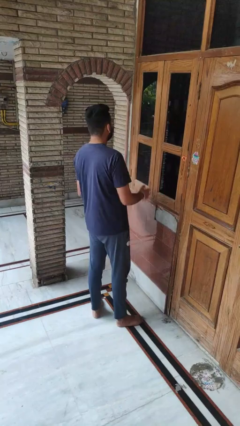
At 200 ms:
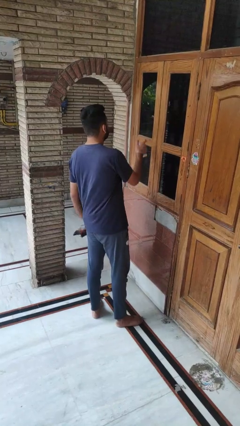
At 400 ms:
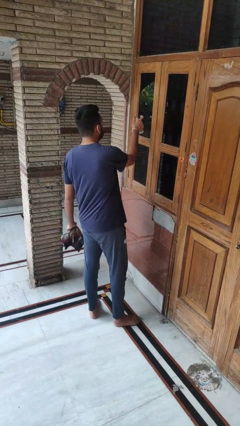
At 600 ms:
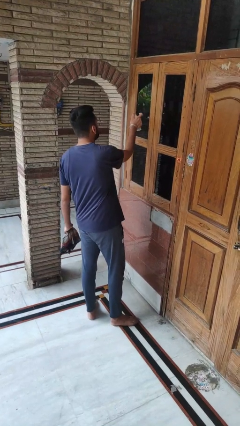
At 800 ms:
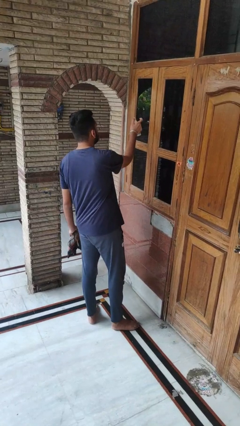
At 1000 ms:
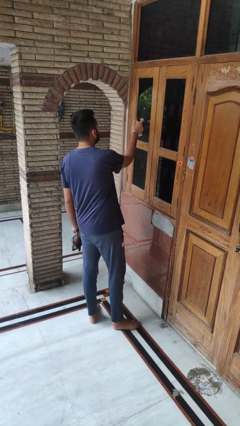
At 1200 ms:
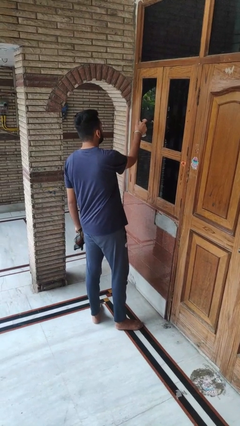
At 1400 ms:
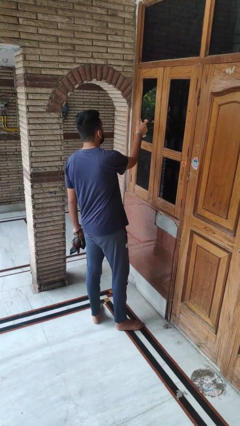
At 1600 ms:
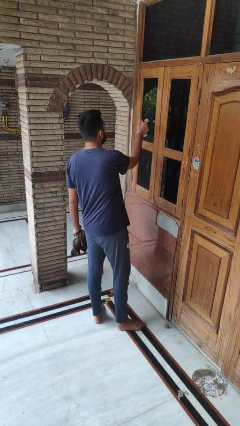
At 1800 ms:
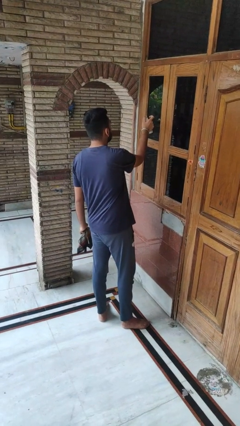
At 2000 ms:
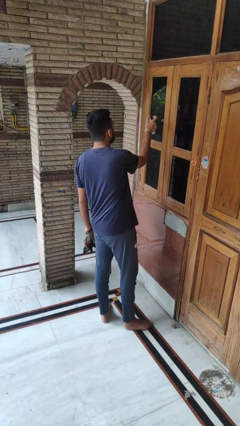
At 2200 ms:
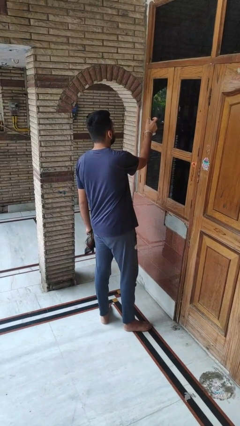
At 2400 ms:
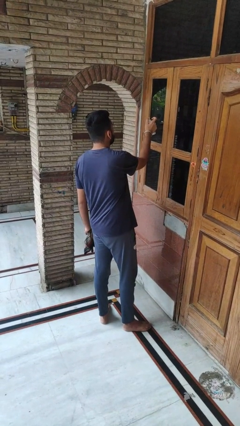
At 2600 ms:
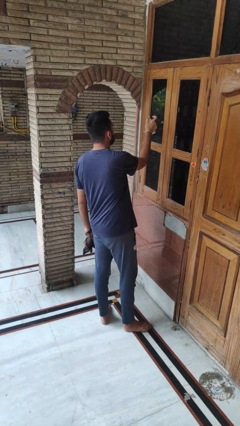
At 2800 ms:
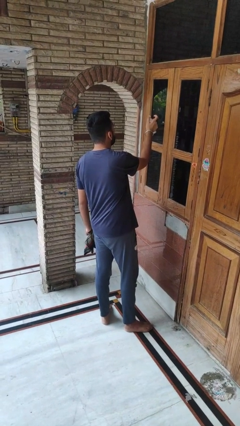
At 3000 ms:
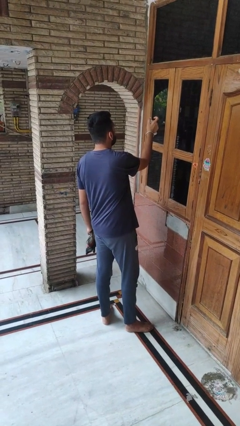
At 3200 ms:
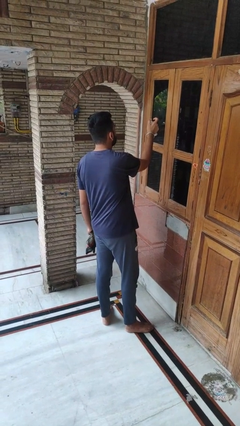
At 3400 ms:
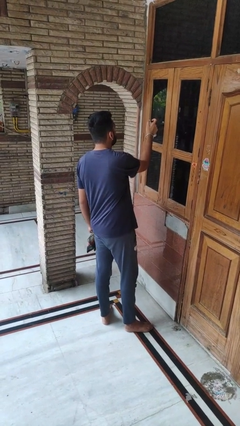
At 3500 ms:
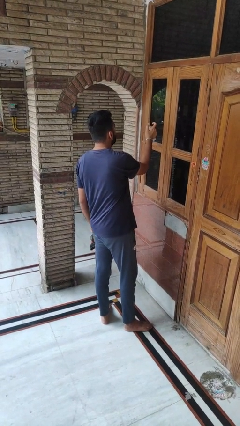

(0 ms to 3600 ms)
person sprays from bottle

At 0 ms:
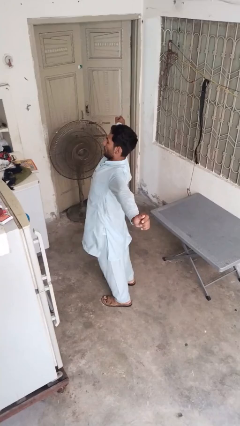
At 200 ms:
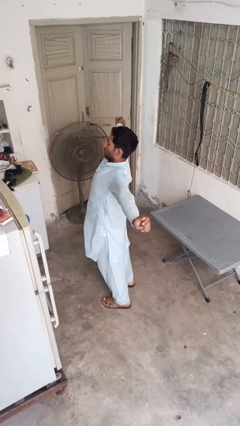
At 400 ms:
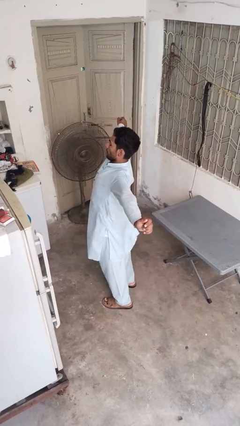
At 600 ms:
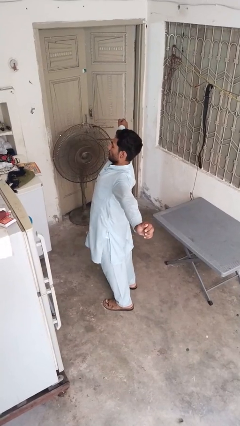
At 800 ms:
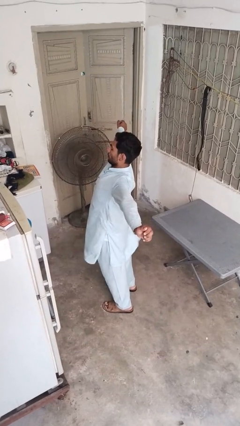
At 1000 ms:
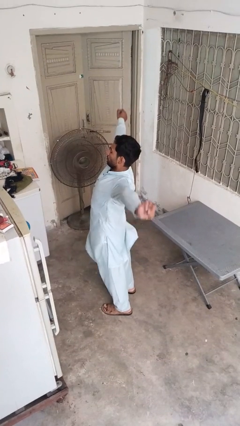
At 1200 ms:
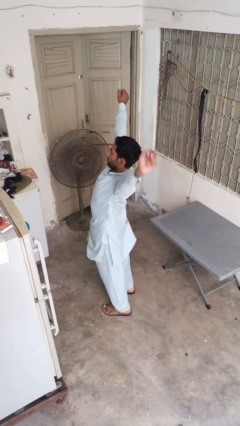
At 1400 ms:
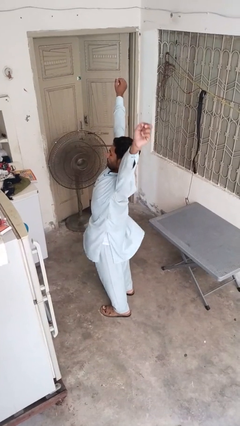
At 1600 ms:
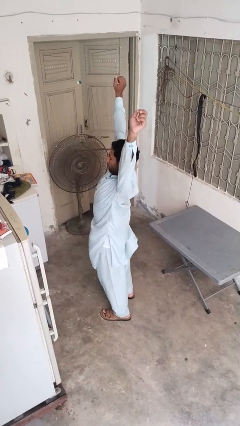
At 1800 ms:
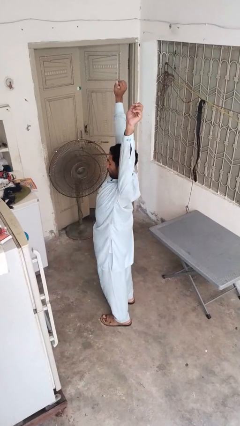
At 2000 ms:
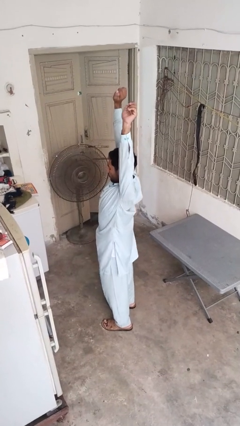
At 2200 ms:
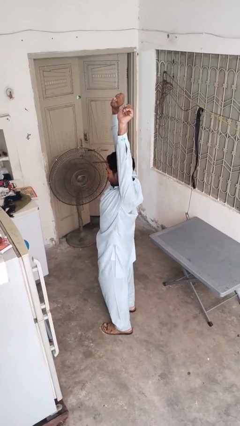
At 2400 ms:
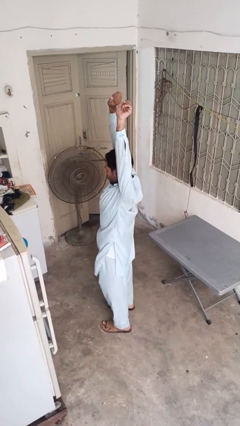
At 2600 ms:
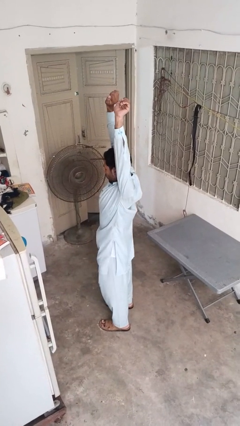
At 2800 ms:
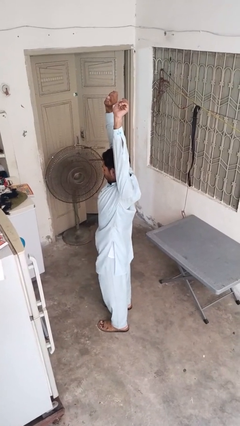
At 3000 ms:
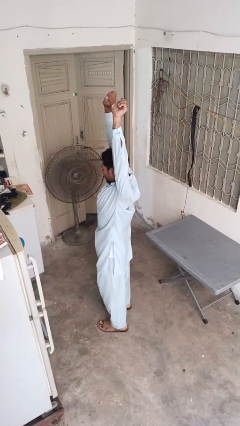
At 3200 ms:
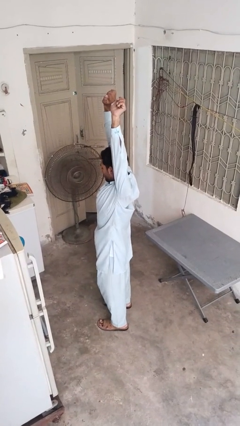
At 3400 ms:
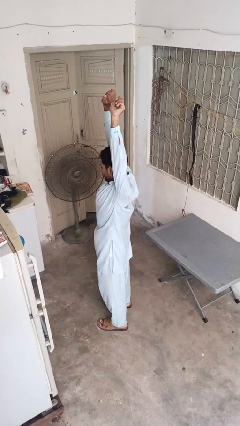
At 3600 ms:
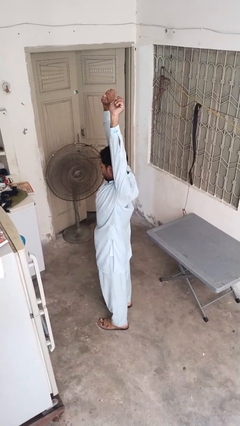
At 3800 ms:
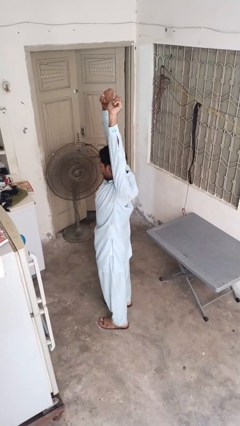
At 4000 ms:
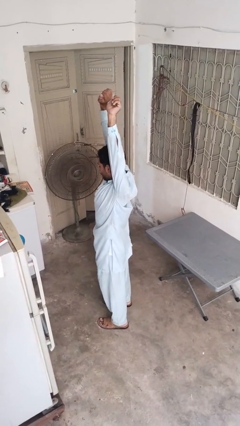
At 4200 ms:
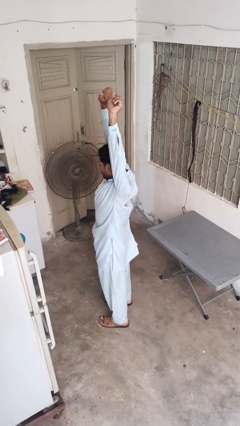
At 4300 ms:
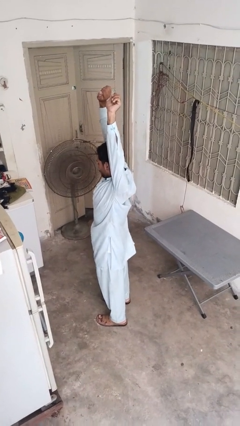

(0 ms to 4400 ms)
person stretches arms over head

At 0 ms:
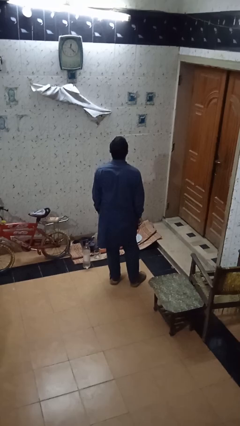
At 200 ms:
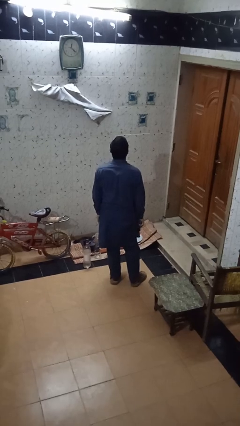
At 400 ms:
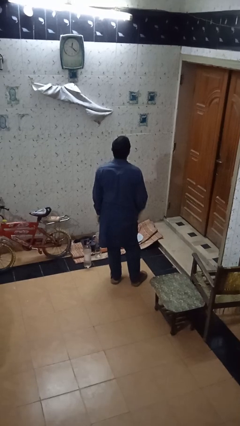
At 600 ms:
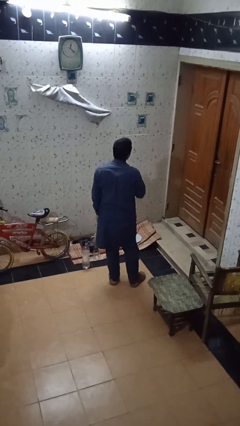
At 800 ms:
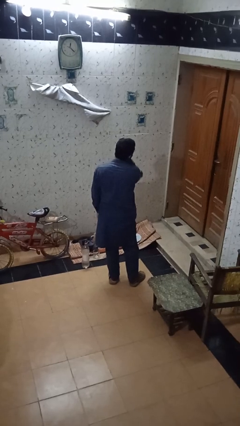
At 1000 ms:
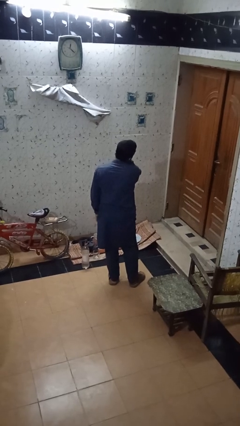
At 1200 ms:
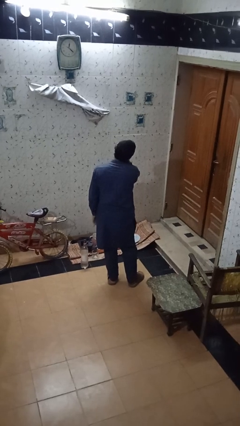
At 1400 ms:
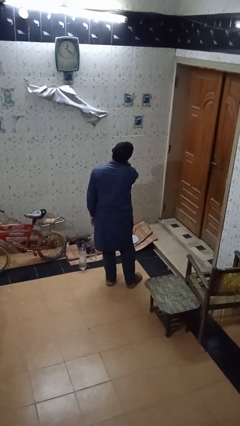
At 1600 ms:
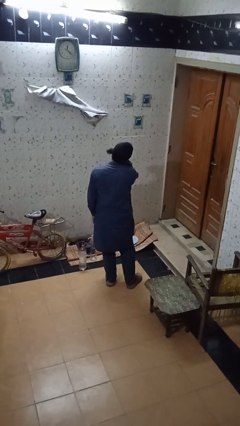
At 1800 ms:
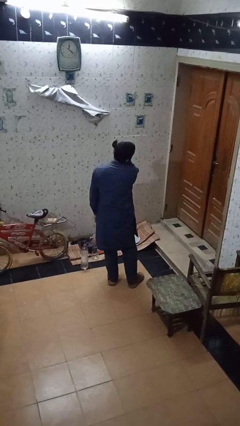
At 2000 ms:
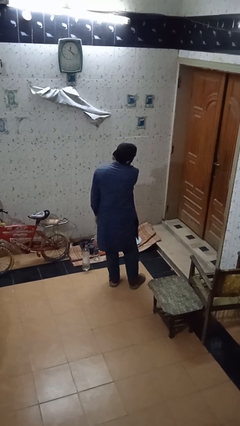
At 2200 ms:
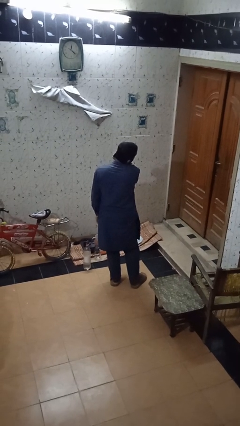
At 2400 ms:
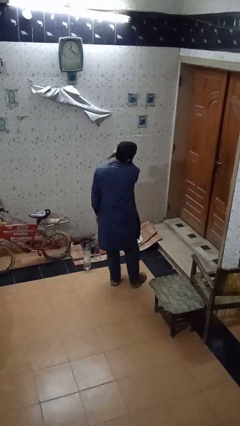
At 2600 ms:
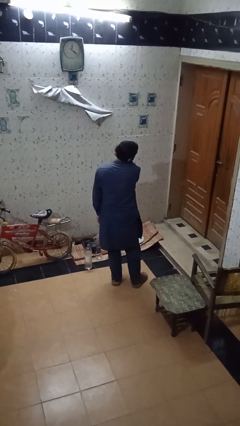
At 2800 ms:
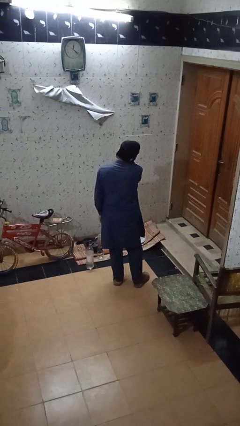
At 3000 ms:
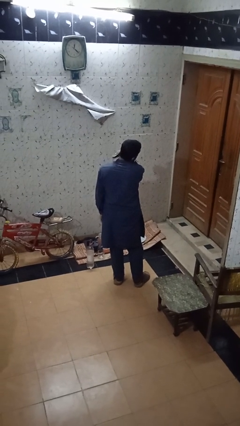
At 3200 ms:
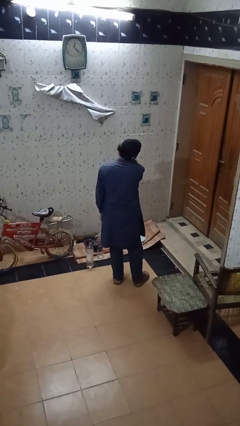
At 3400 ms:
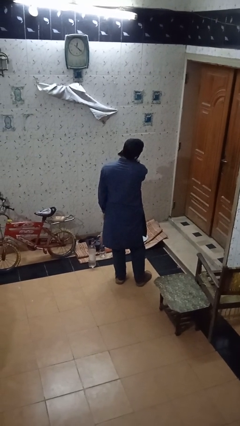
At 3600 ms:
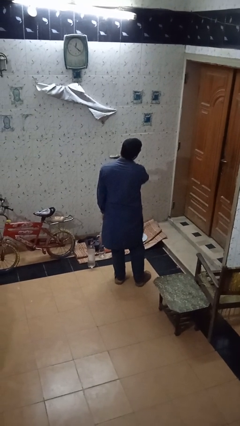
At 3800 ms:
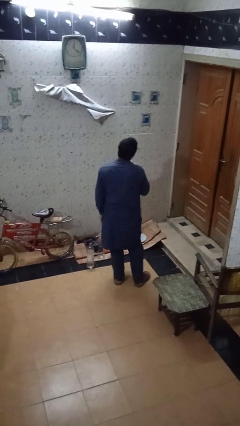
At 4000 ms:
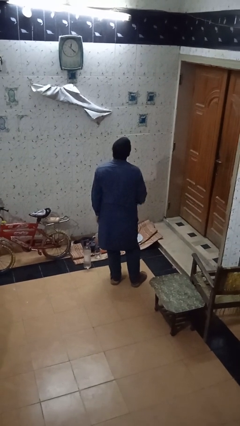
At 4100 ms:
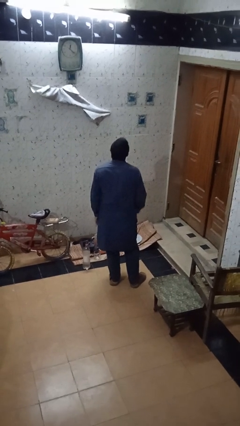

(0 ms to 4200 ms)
person brushes hair

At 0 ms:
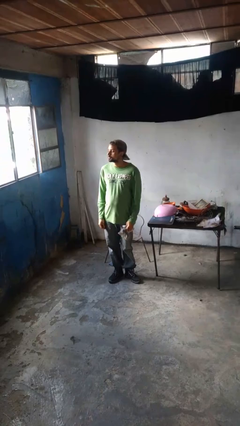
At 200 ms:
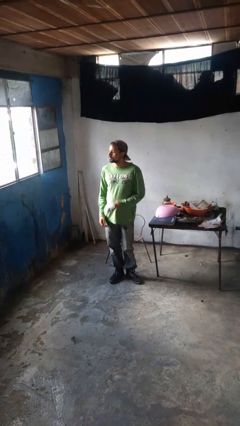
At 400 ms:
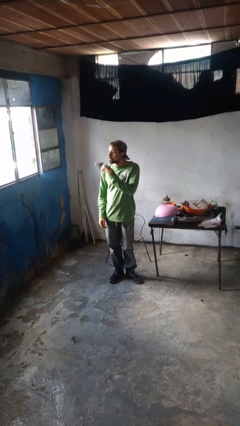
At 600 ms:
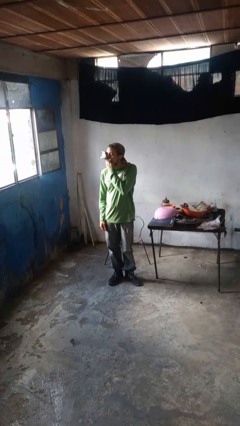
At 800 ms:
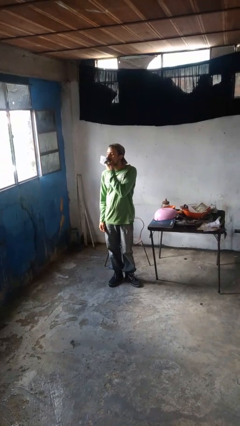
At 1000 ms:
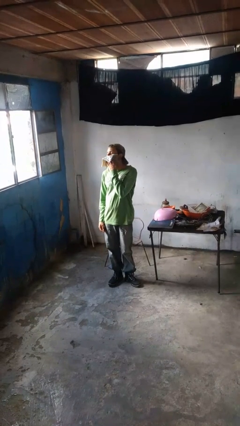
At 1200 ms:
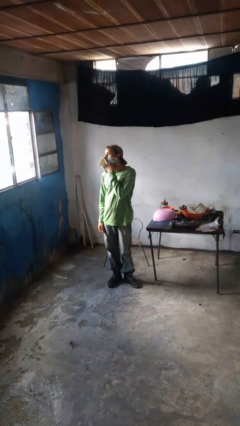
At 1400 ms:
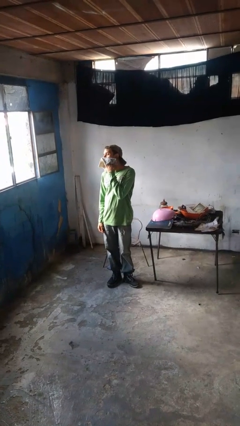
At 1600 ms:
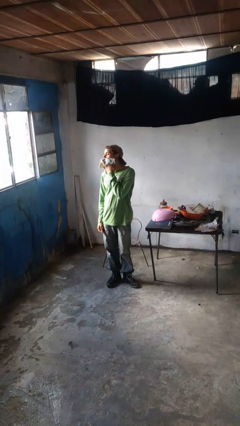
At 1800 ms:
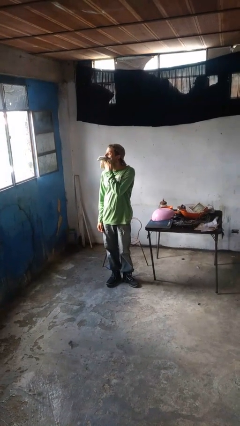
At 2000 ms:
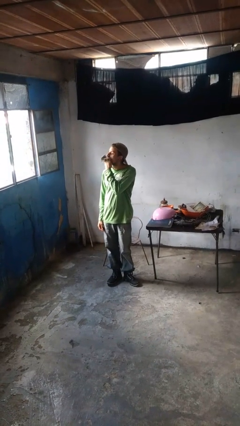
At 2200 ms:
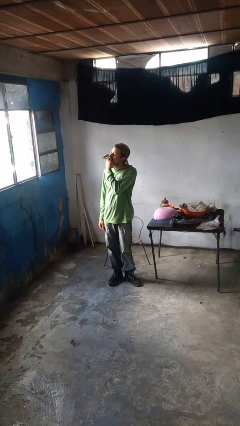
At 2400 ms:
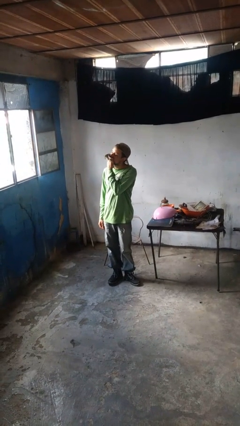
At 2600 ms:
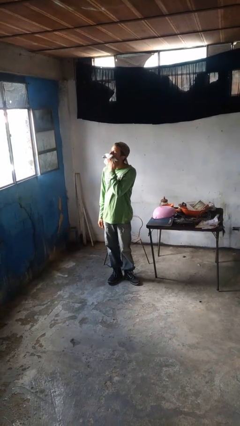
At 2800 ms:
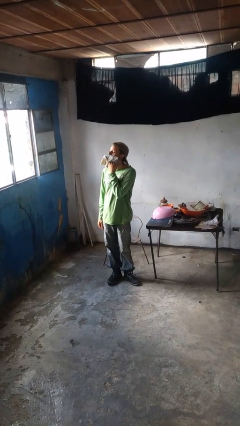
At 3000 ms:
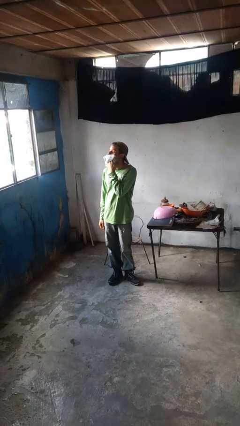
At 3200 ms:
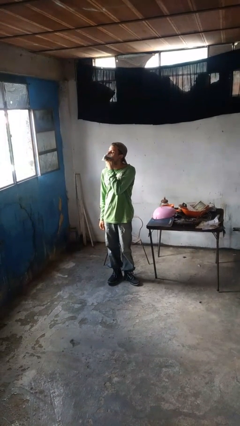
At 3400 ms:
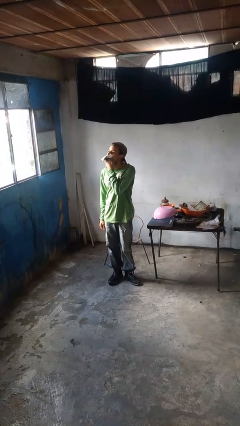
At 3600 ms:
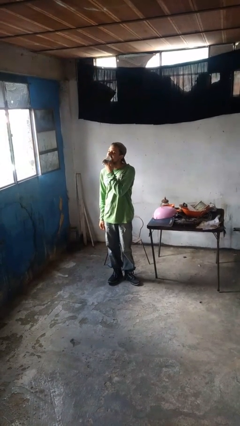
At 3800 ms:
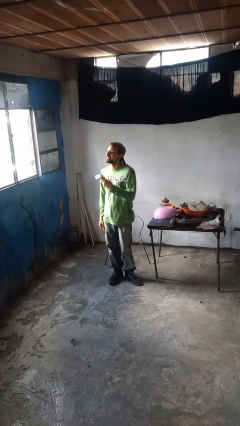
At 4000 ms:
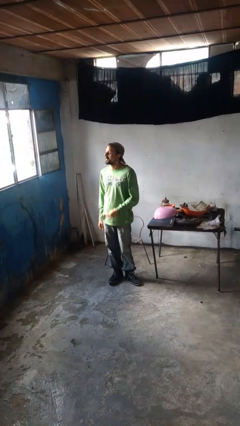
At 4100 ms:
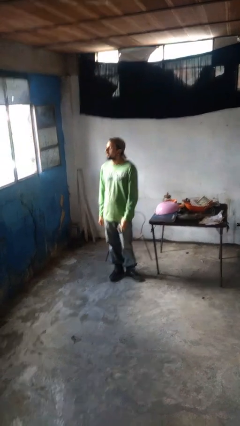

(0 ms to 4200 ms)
person wipes mouth with napkin

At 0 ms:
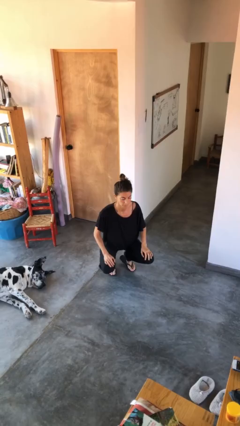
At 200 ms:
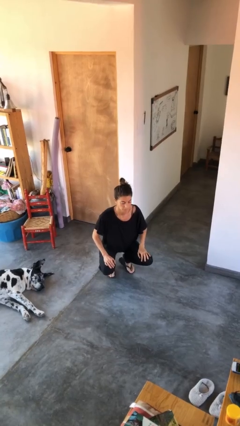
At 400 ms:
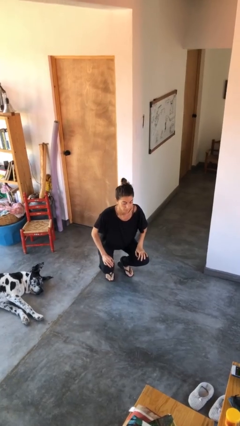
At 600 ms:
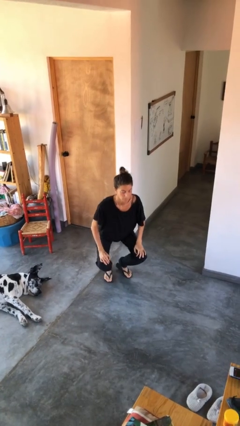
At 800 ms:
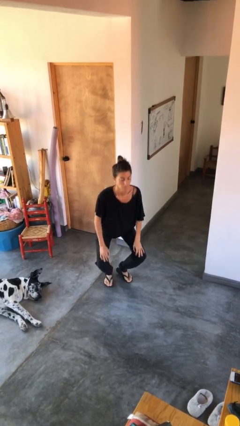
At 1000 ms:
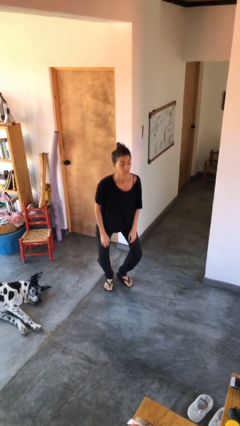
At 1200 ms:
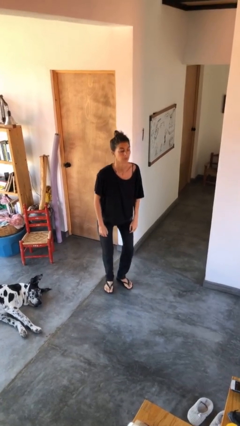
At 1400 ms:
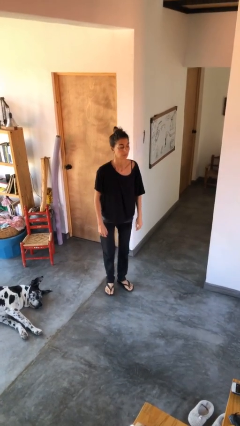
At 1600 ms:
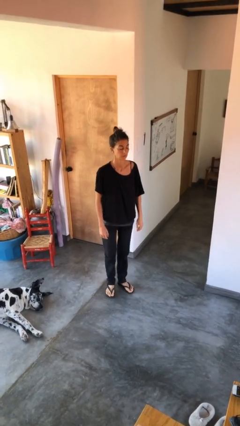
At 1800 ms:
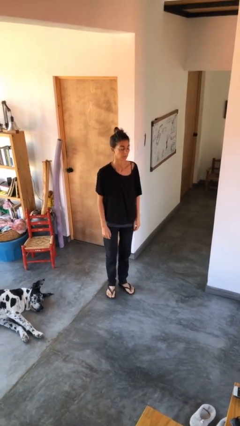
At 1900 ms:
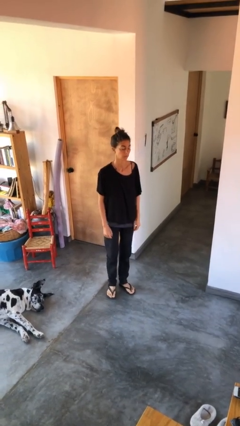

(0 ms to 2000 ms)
person stands up
